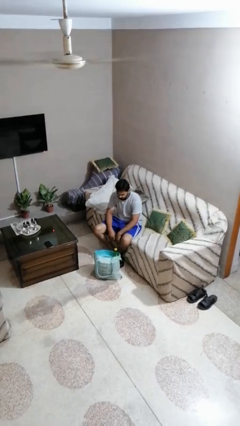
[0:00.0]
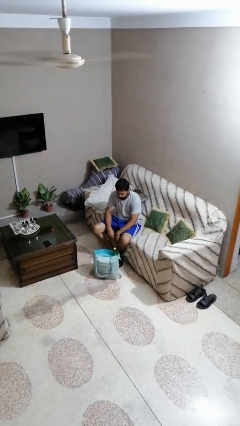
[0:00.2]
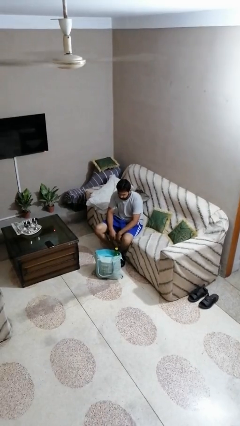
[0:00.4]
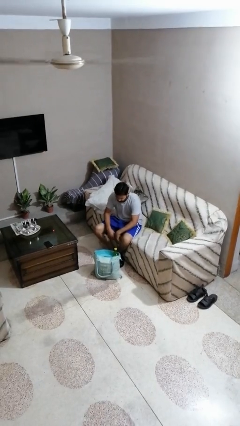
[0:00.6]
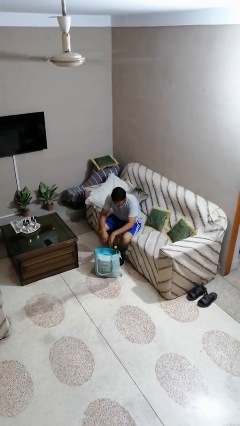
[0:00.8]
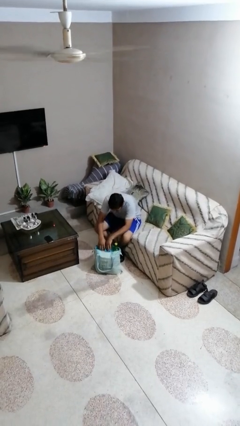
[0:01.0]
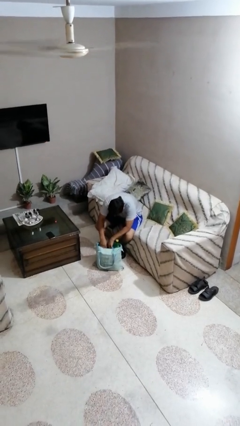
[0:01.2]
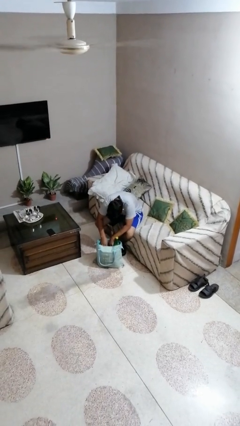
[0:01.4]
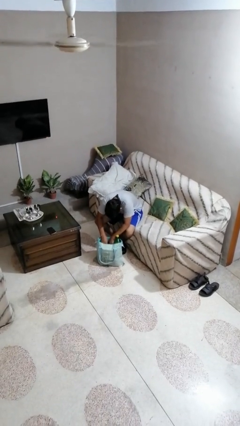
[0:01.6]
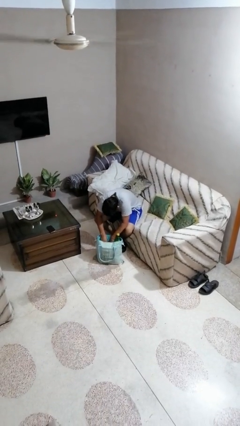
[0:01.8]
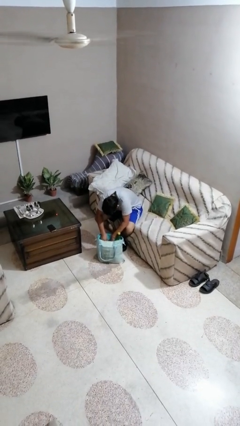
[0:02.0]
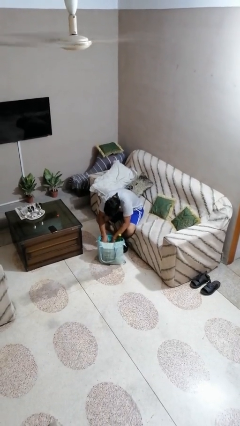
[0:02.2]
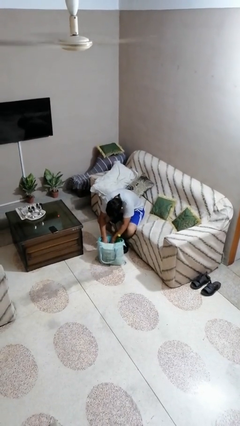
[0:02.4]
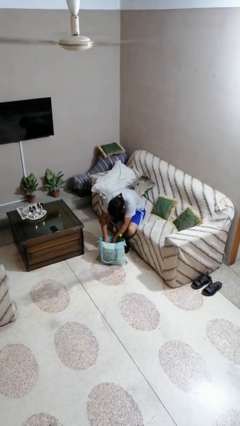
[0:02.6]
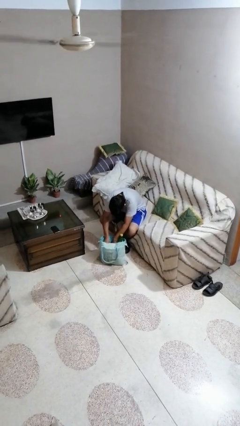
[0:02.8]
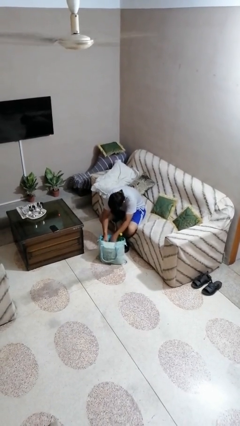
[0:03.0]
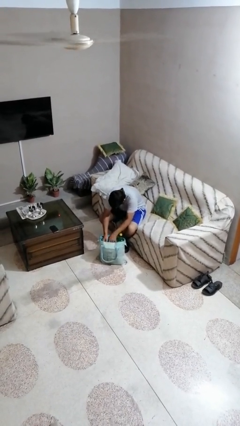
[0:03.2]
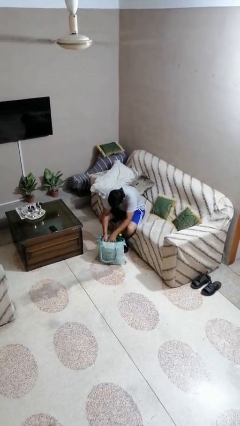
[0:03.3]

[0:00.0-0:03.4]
person searches in bag

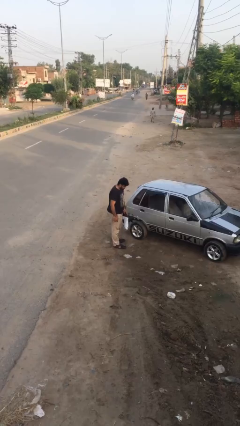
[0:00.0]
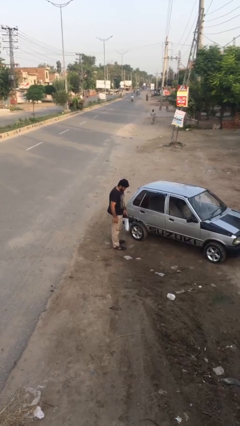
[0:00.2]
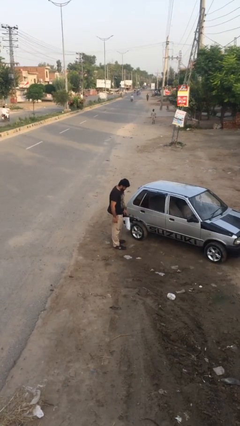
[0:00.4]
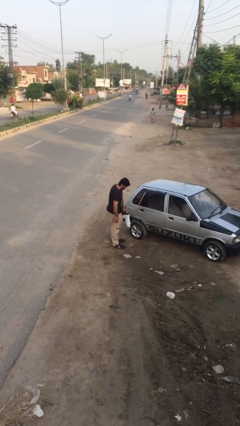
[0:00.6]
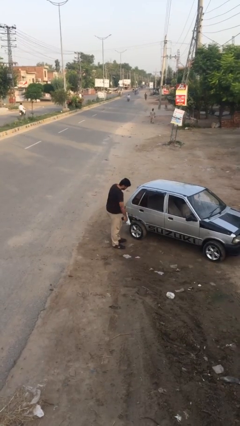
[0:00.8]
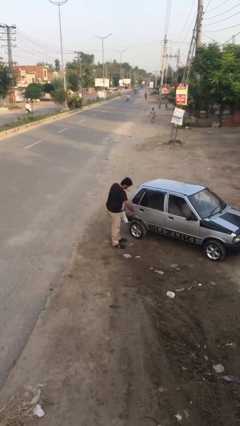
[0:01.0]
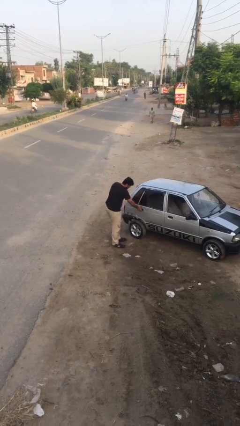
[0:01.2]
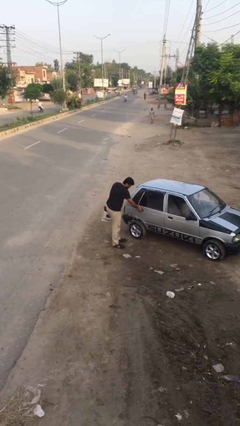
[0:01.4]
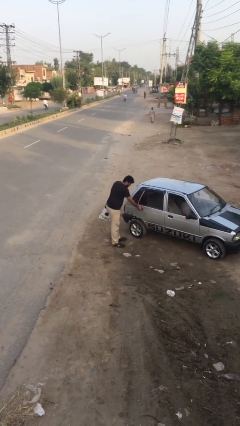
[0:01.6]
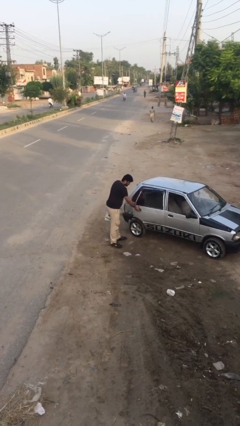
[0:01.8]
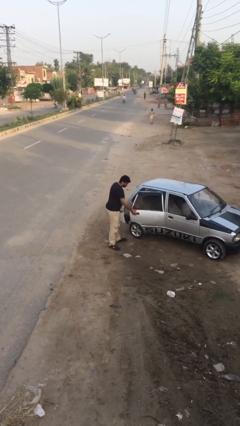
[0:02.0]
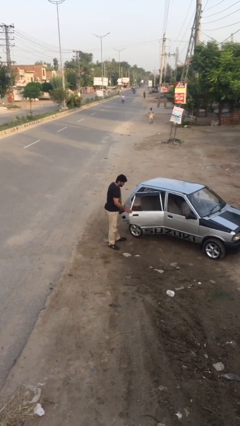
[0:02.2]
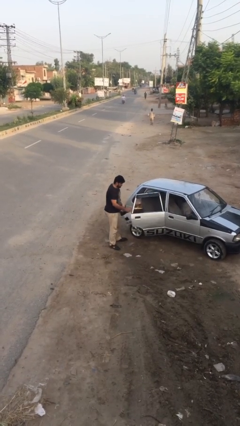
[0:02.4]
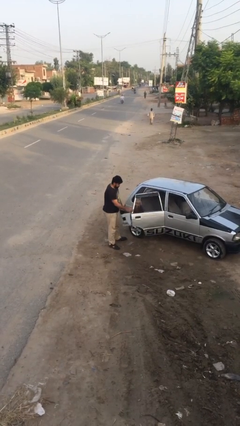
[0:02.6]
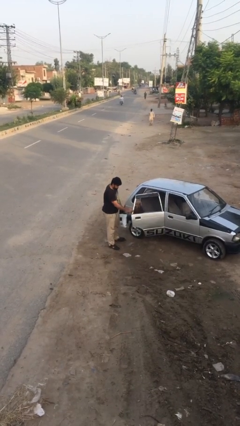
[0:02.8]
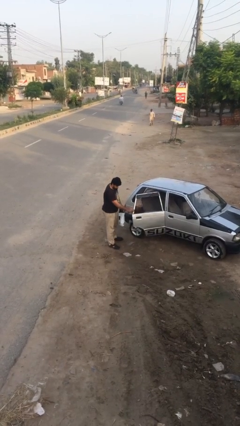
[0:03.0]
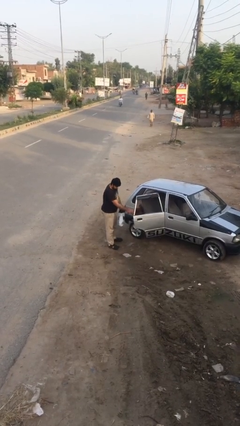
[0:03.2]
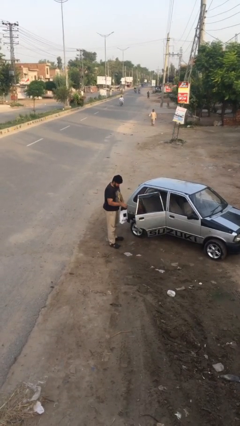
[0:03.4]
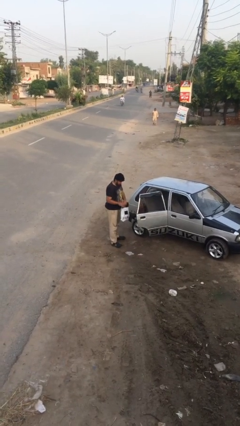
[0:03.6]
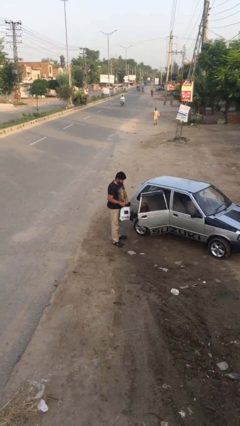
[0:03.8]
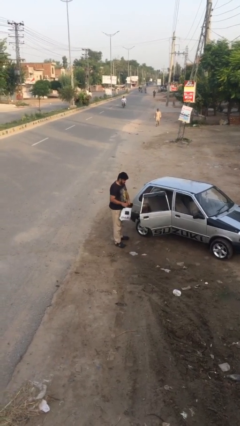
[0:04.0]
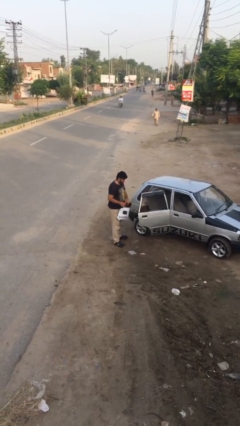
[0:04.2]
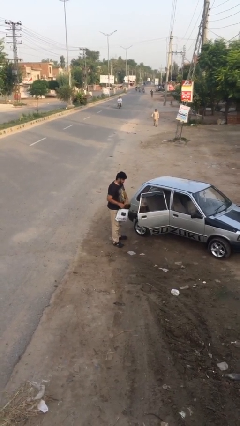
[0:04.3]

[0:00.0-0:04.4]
person opens car door

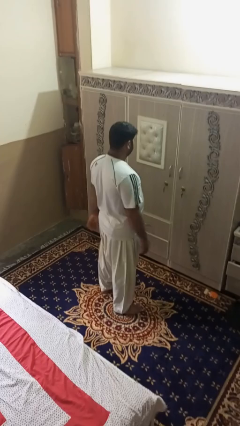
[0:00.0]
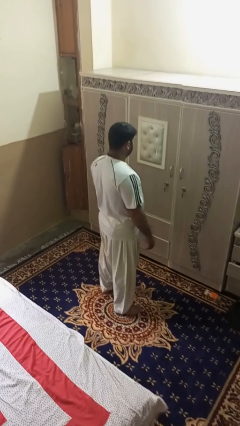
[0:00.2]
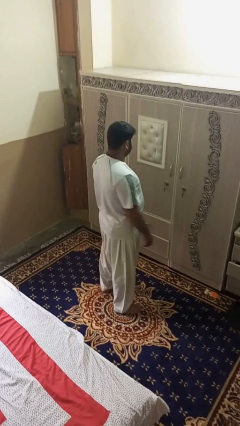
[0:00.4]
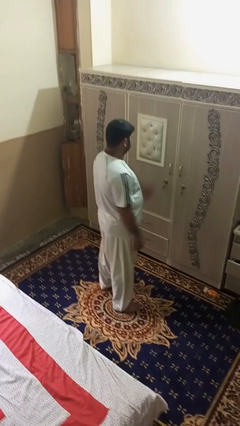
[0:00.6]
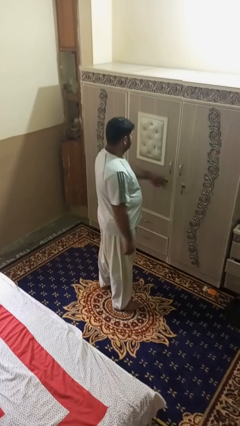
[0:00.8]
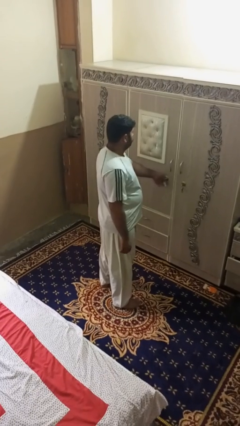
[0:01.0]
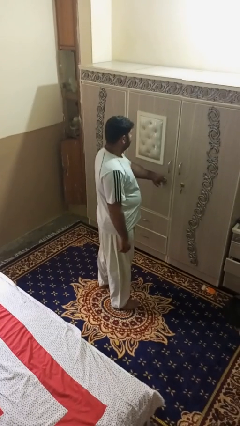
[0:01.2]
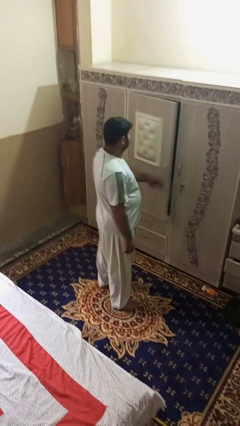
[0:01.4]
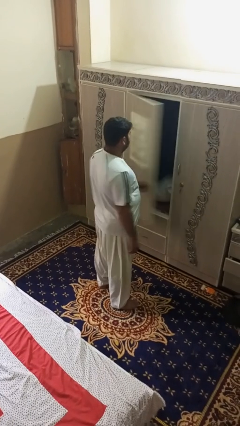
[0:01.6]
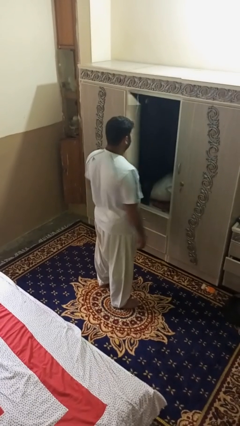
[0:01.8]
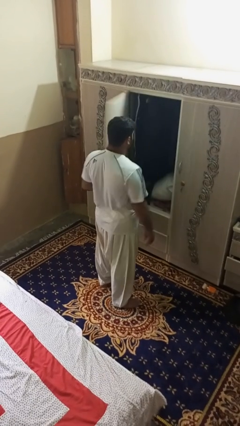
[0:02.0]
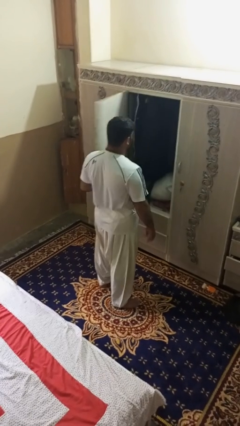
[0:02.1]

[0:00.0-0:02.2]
person opens dresser drawer

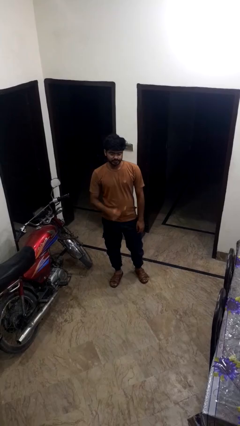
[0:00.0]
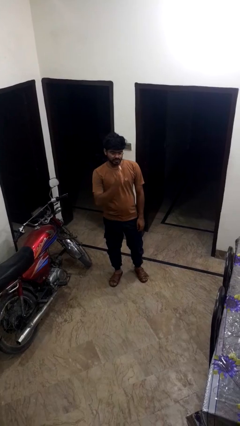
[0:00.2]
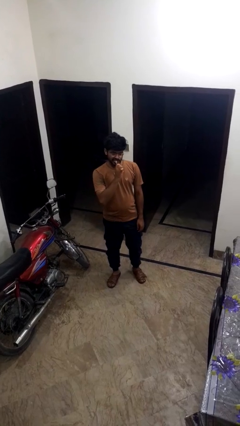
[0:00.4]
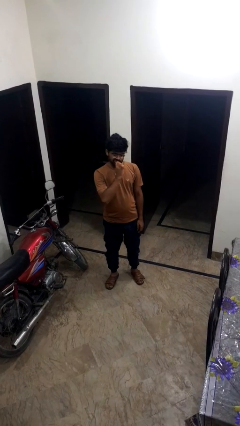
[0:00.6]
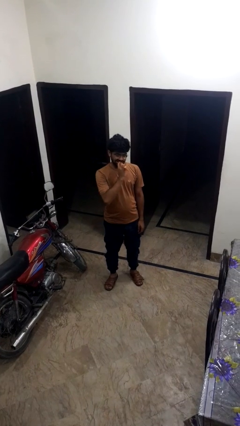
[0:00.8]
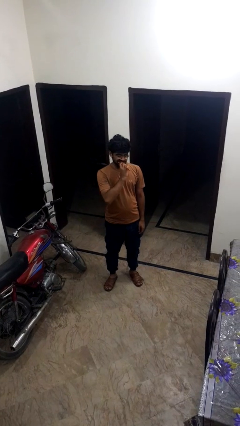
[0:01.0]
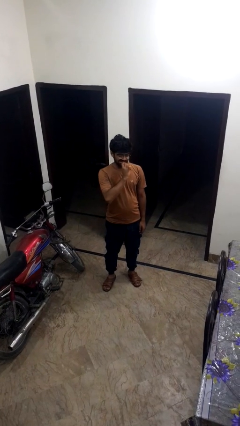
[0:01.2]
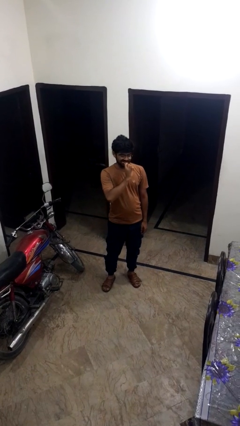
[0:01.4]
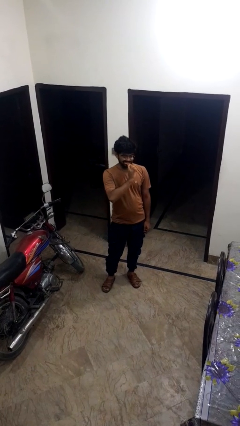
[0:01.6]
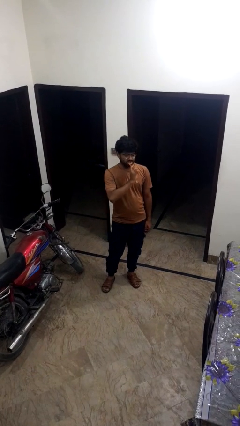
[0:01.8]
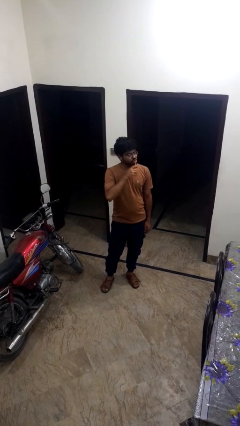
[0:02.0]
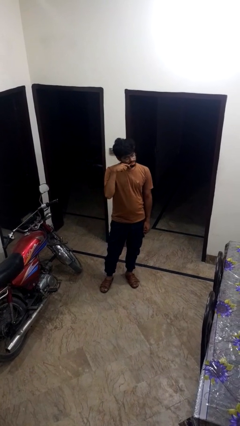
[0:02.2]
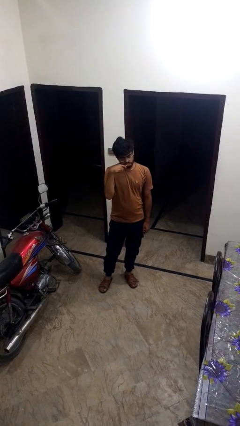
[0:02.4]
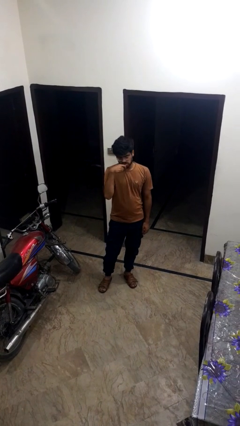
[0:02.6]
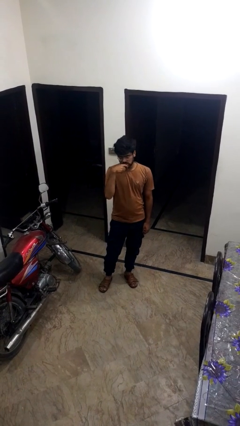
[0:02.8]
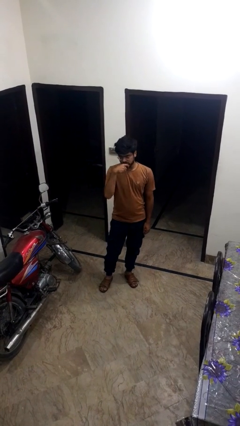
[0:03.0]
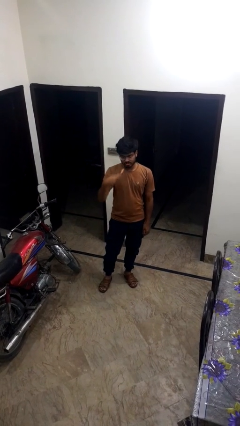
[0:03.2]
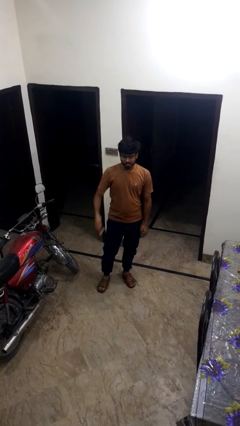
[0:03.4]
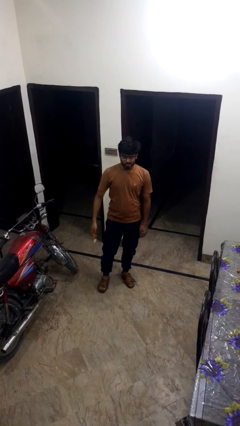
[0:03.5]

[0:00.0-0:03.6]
person brushes teeth

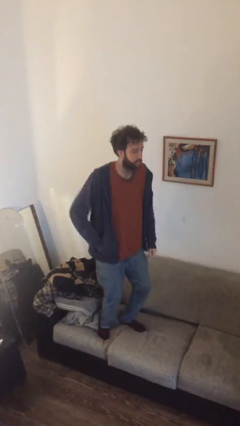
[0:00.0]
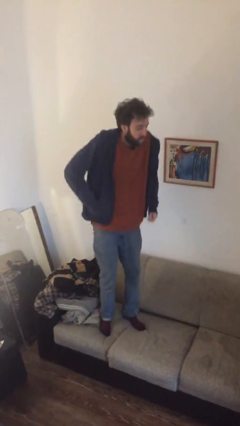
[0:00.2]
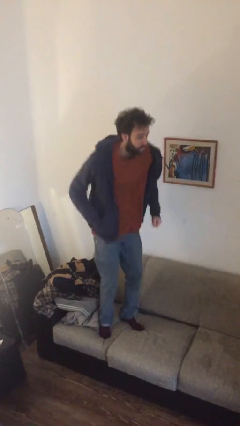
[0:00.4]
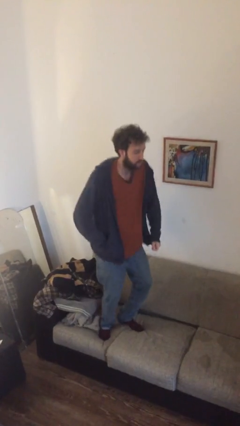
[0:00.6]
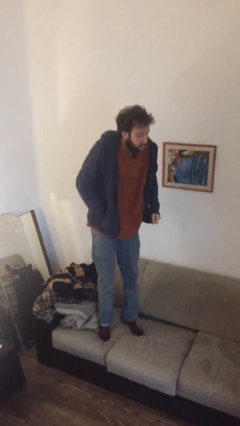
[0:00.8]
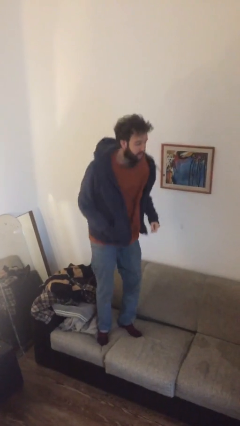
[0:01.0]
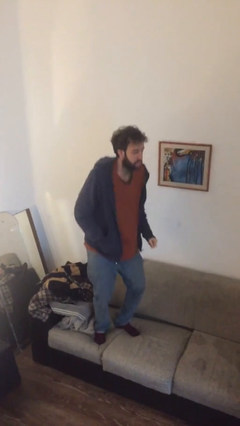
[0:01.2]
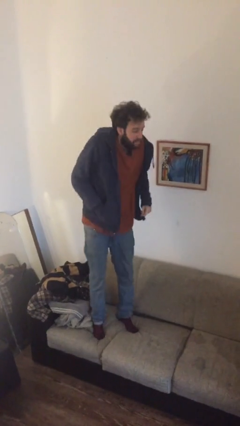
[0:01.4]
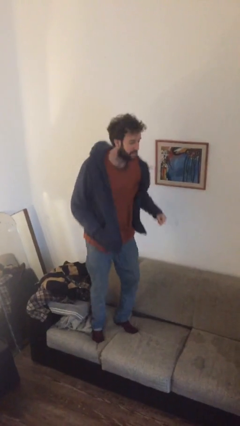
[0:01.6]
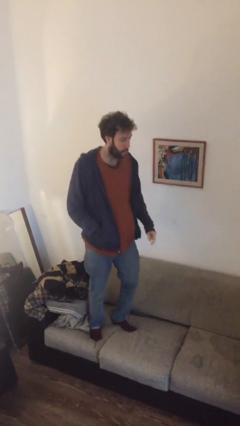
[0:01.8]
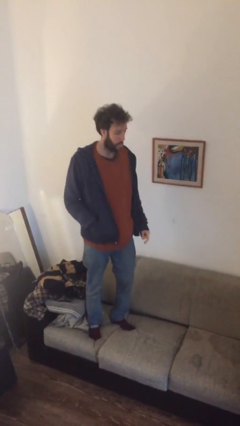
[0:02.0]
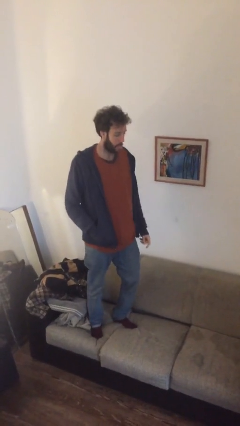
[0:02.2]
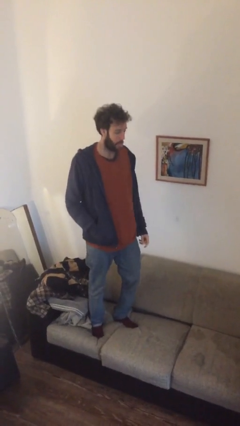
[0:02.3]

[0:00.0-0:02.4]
person jumps on couch

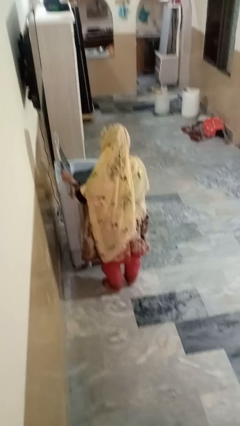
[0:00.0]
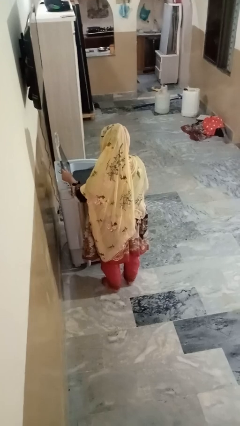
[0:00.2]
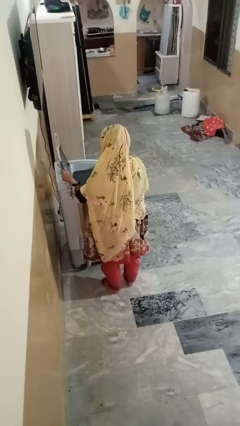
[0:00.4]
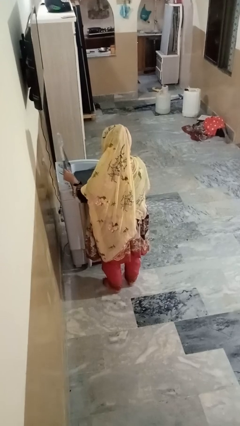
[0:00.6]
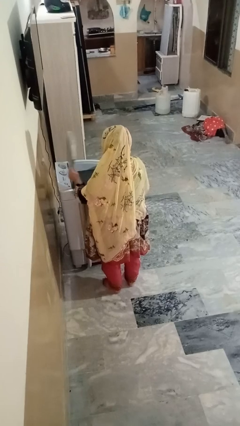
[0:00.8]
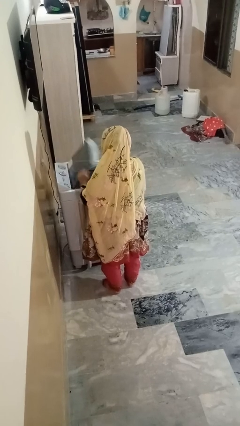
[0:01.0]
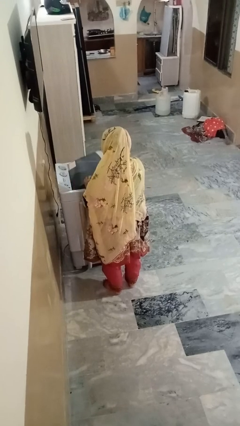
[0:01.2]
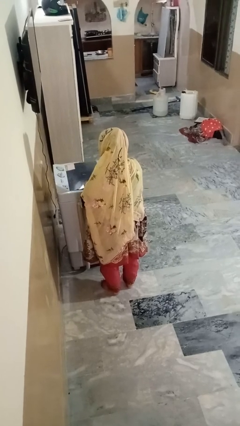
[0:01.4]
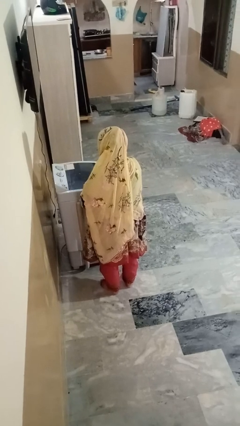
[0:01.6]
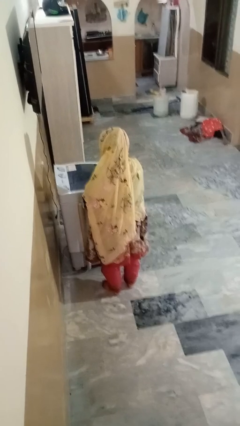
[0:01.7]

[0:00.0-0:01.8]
person closes clothes washer
